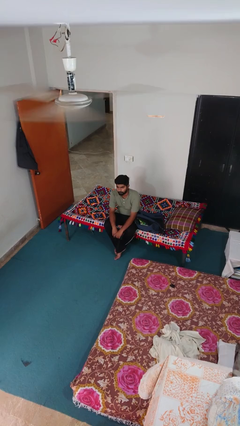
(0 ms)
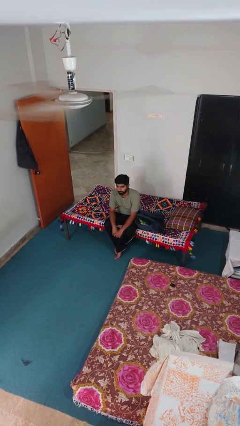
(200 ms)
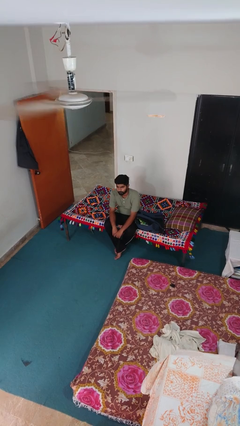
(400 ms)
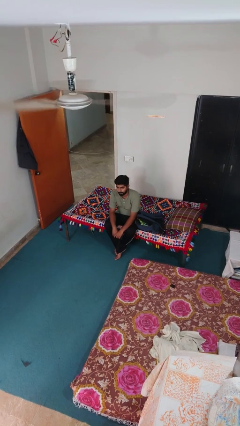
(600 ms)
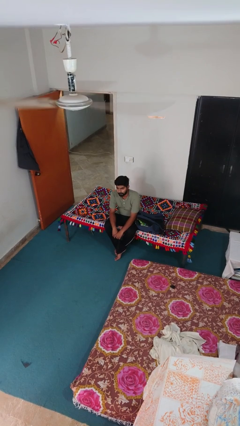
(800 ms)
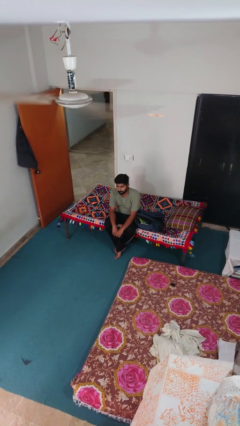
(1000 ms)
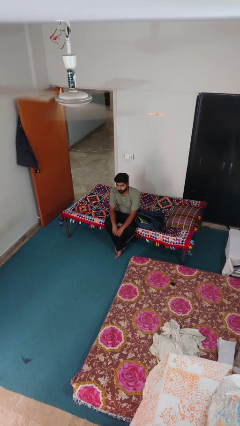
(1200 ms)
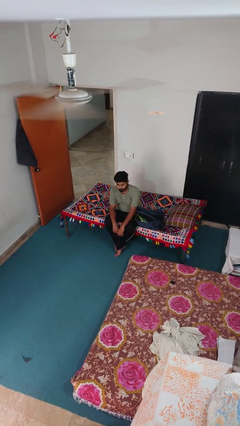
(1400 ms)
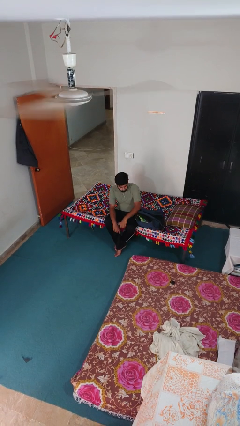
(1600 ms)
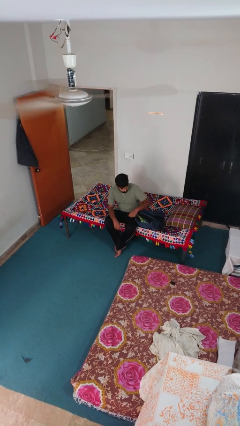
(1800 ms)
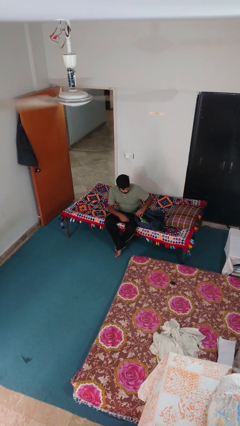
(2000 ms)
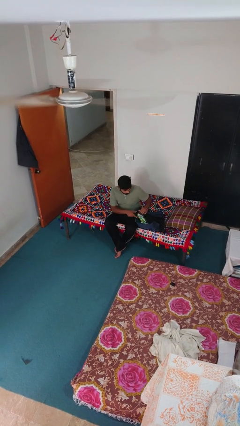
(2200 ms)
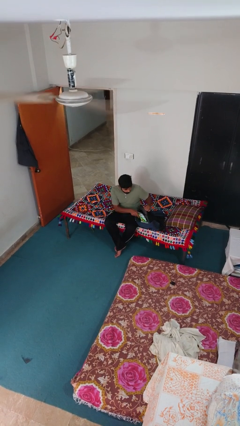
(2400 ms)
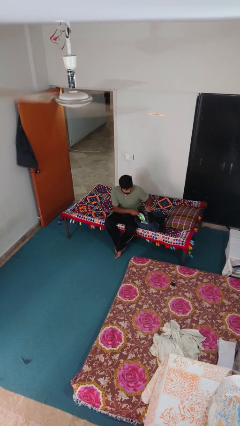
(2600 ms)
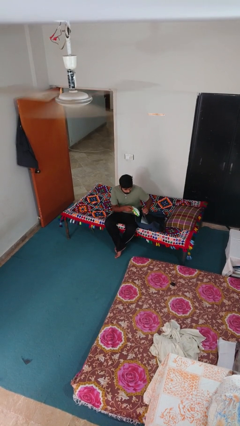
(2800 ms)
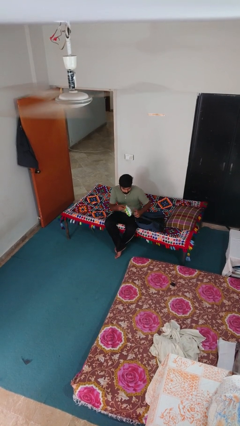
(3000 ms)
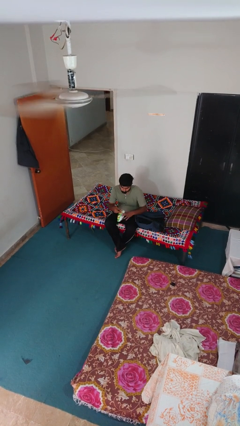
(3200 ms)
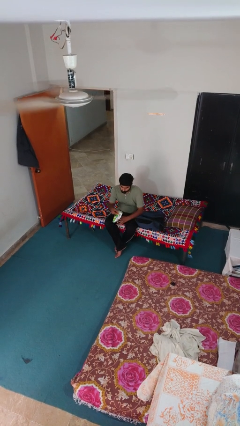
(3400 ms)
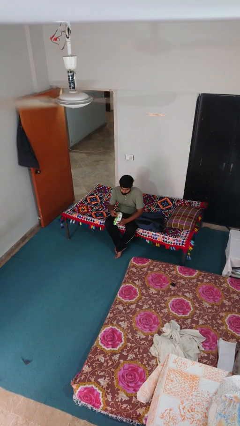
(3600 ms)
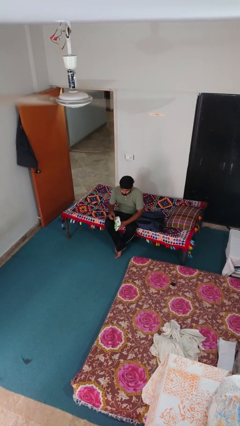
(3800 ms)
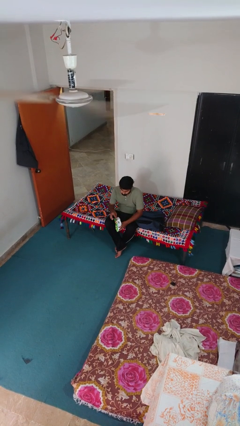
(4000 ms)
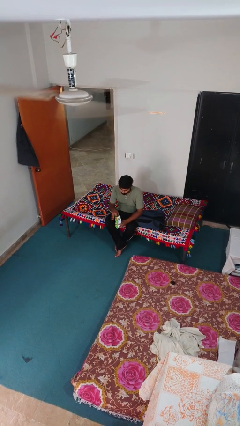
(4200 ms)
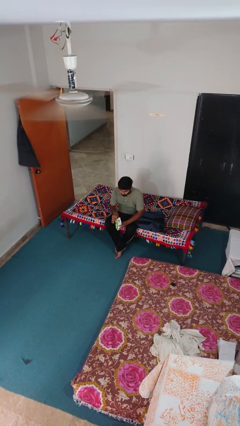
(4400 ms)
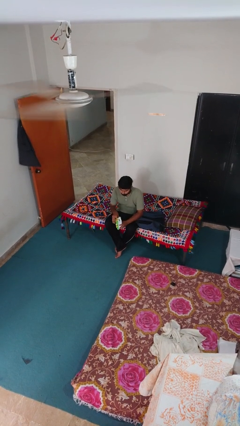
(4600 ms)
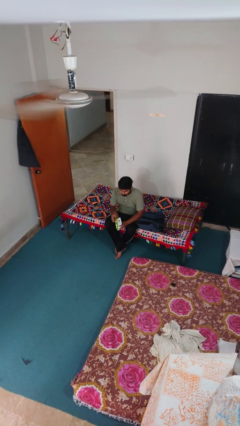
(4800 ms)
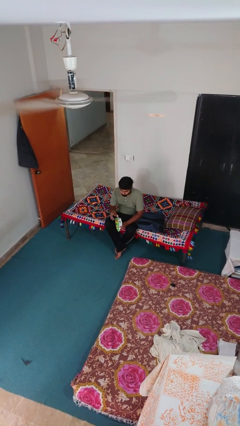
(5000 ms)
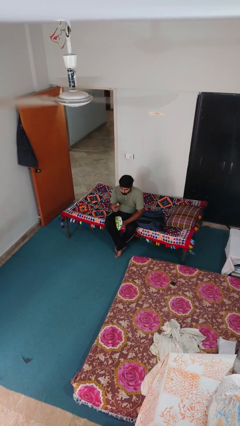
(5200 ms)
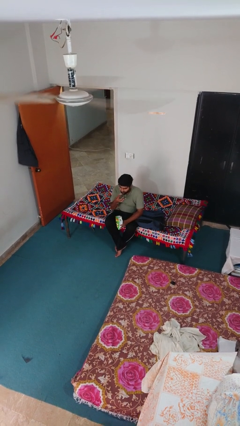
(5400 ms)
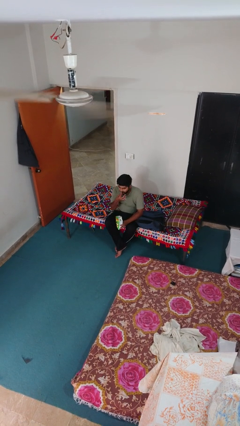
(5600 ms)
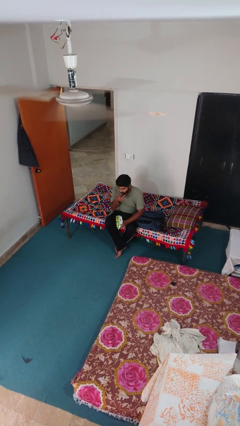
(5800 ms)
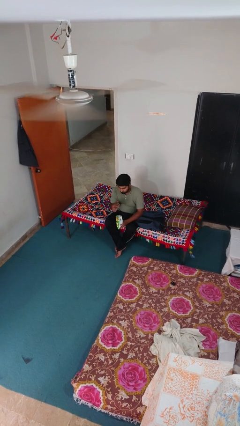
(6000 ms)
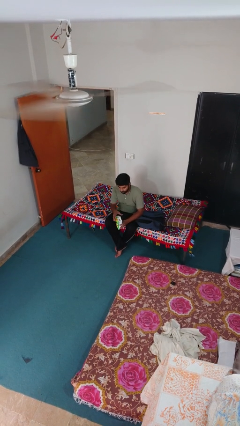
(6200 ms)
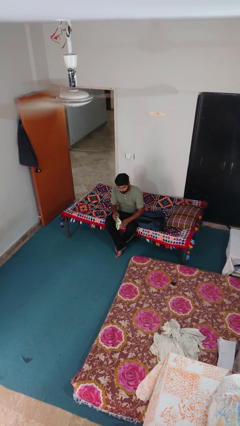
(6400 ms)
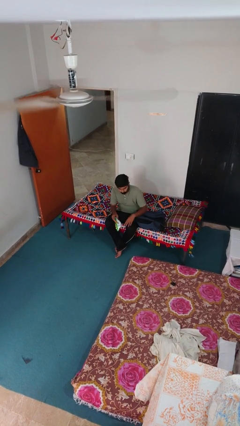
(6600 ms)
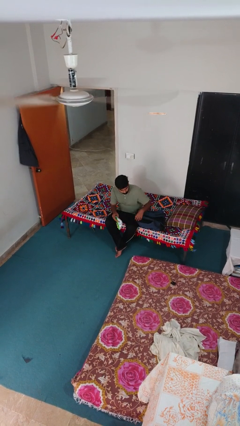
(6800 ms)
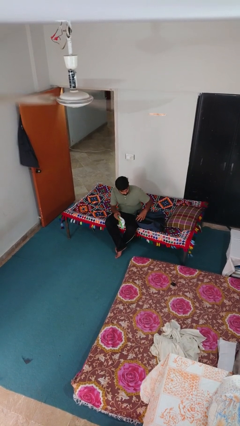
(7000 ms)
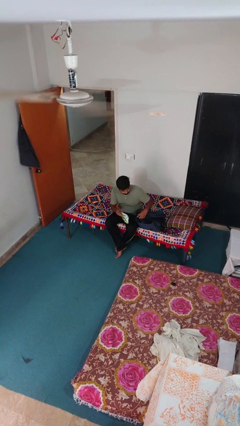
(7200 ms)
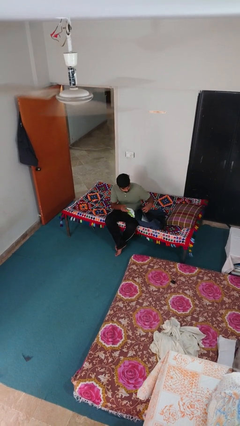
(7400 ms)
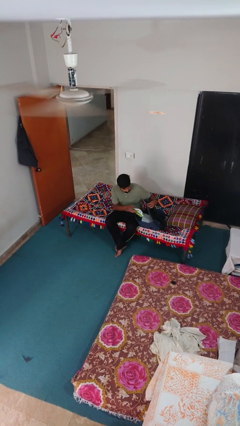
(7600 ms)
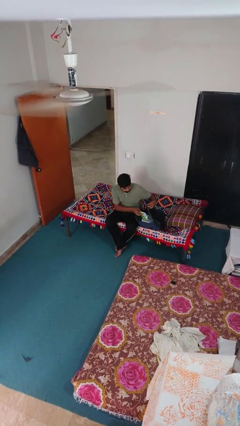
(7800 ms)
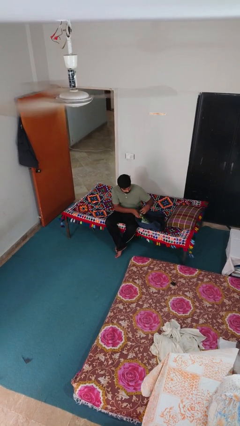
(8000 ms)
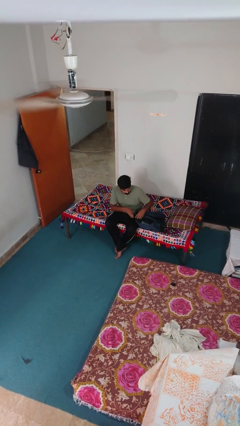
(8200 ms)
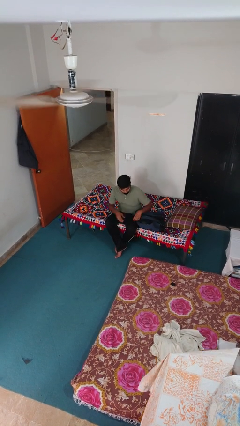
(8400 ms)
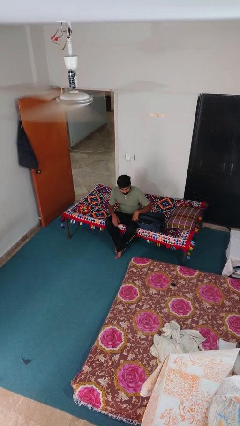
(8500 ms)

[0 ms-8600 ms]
person eats snack from bag

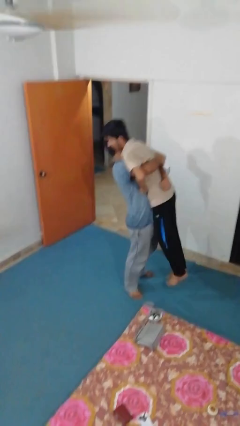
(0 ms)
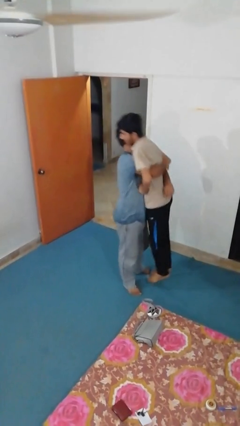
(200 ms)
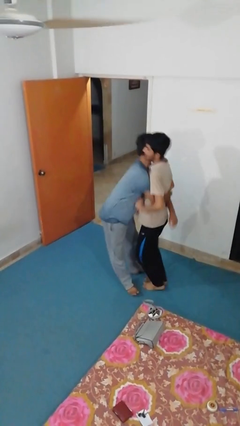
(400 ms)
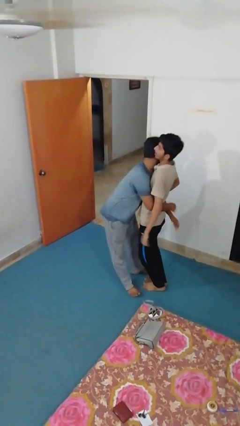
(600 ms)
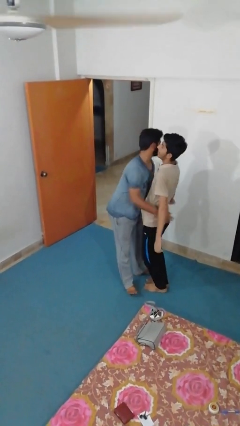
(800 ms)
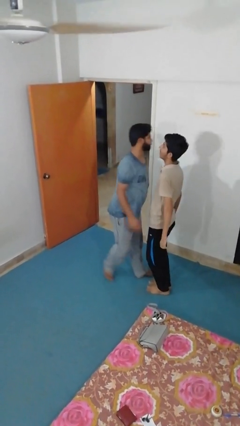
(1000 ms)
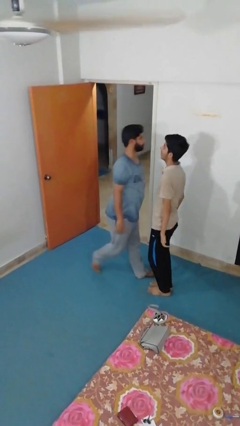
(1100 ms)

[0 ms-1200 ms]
person puts down person

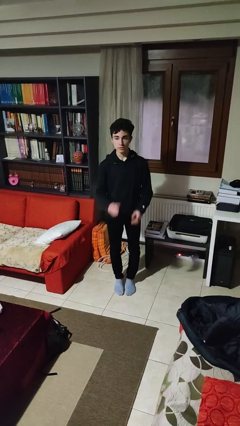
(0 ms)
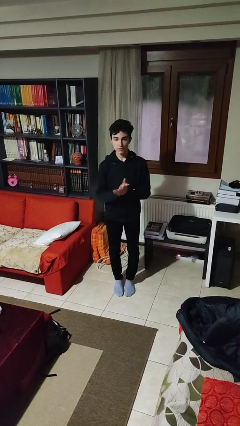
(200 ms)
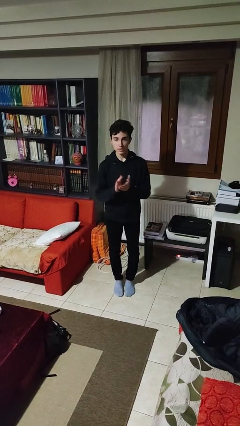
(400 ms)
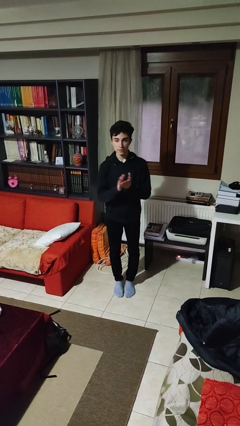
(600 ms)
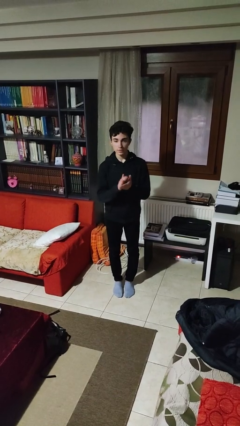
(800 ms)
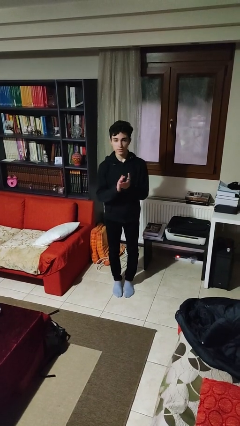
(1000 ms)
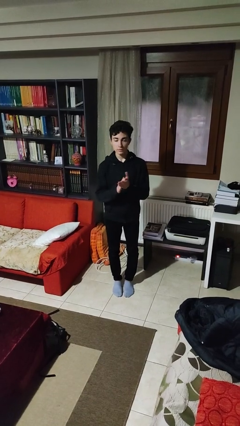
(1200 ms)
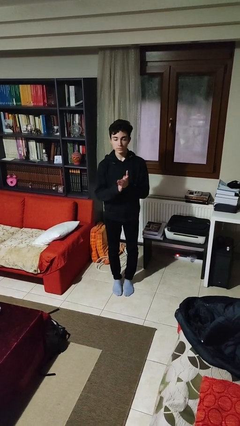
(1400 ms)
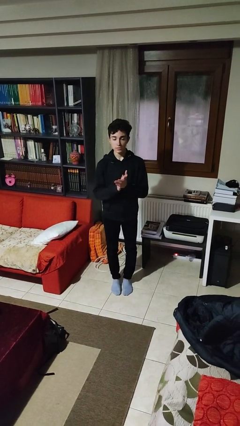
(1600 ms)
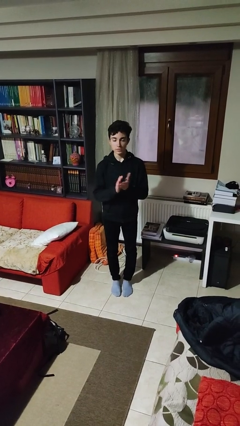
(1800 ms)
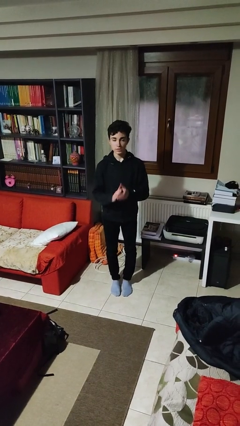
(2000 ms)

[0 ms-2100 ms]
person claps hands

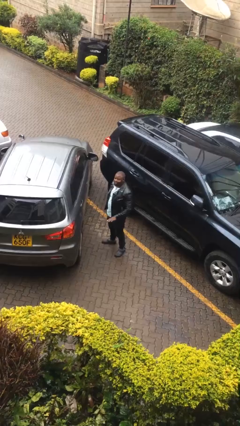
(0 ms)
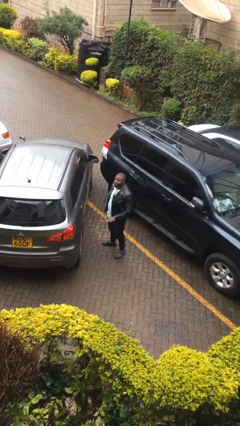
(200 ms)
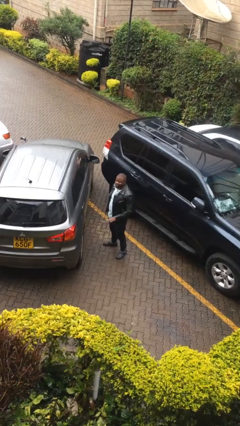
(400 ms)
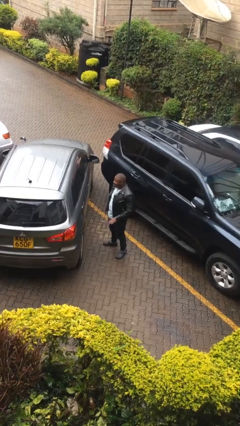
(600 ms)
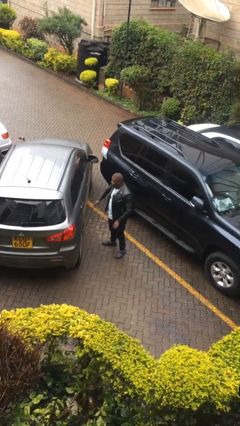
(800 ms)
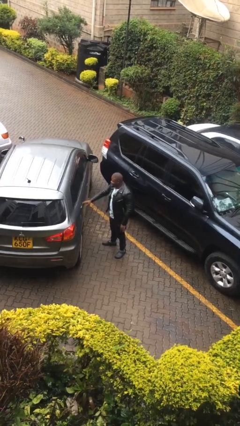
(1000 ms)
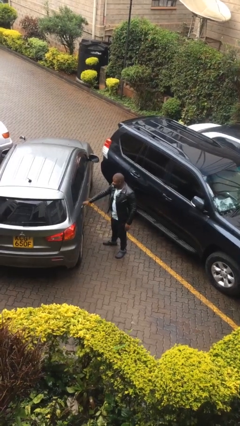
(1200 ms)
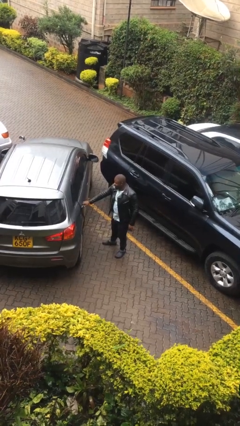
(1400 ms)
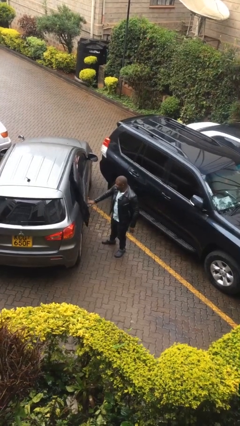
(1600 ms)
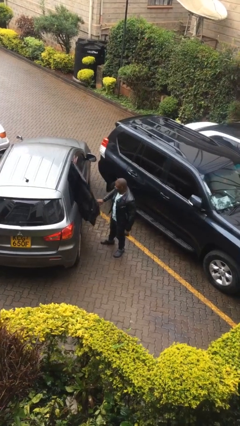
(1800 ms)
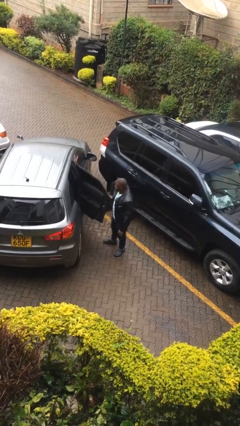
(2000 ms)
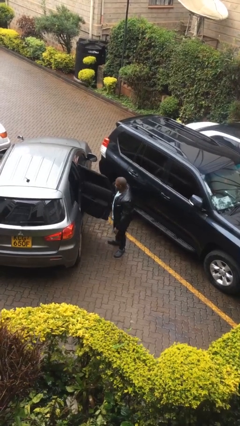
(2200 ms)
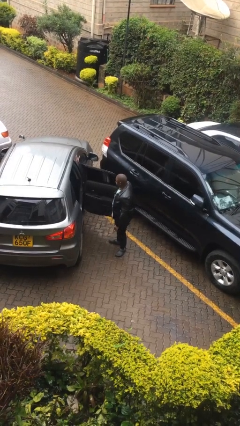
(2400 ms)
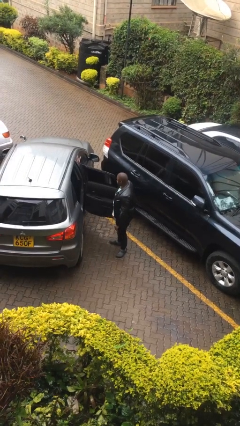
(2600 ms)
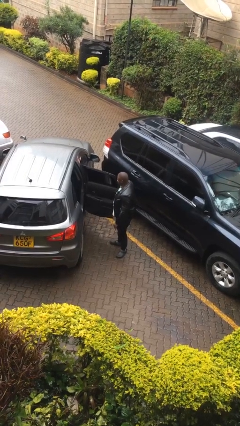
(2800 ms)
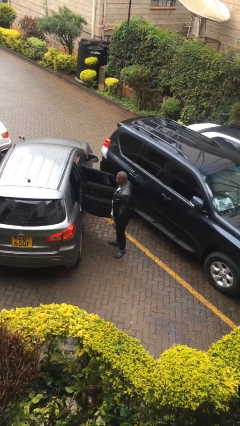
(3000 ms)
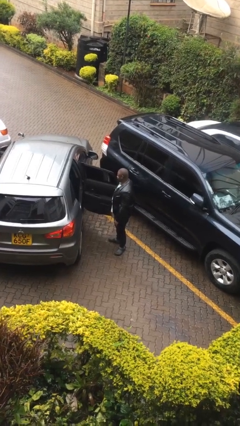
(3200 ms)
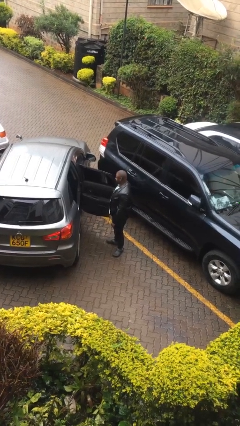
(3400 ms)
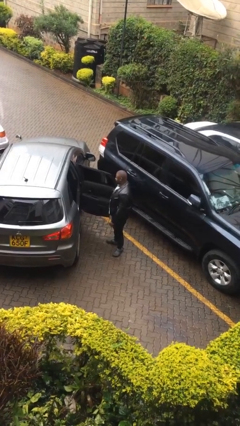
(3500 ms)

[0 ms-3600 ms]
person opens car door

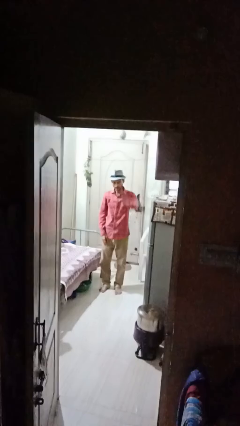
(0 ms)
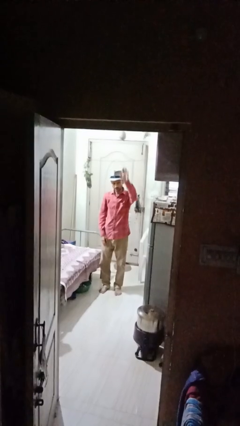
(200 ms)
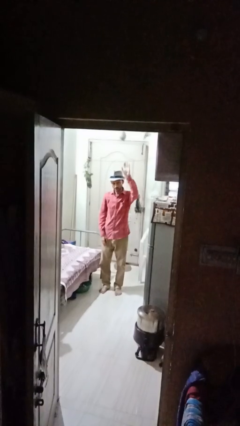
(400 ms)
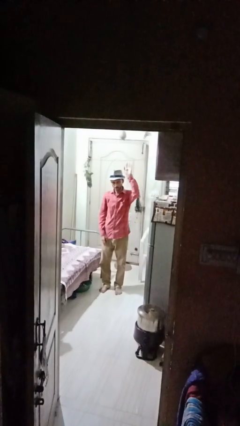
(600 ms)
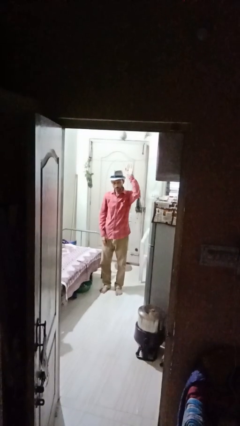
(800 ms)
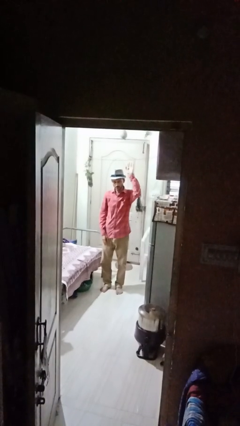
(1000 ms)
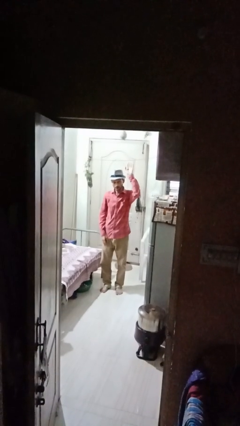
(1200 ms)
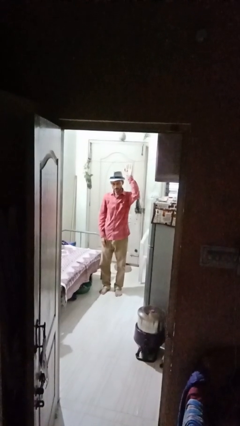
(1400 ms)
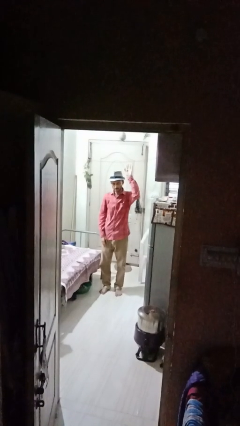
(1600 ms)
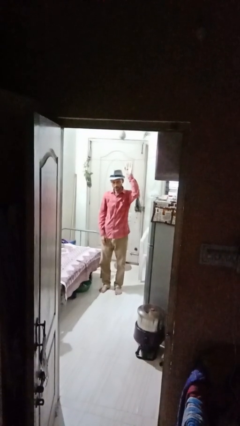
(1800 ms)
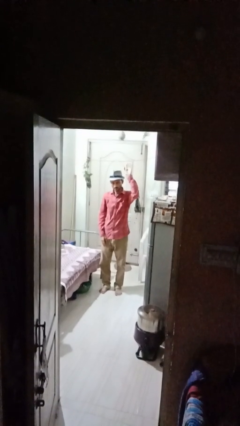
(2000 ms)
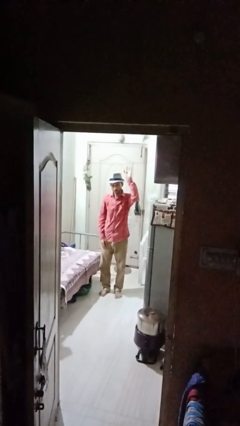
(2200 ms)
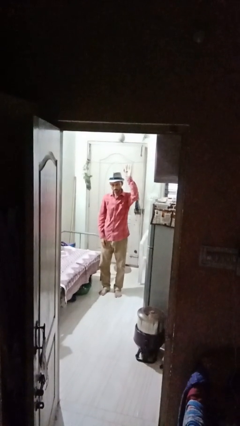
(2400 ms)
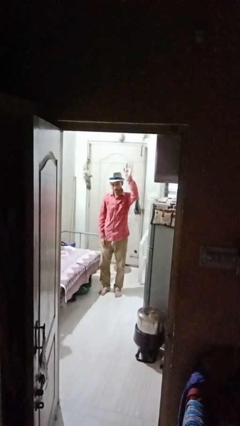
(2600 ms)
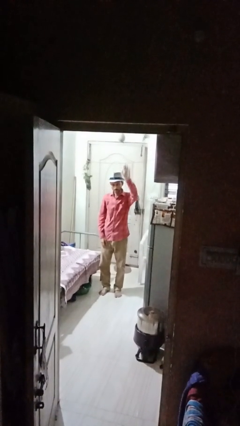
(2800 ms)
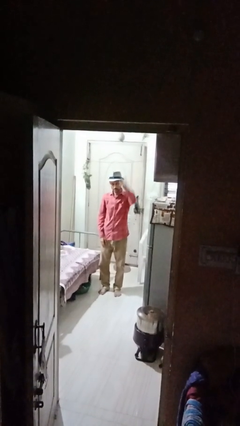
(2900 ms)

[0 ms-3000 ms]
person gestures raise hand
